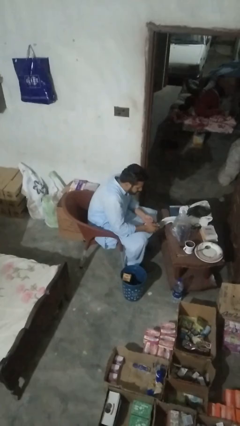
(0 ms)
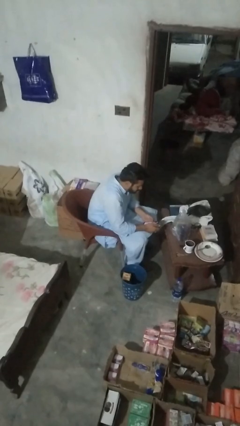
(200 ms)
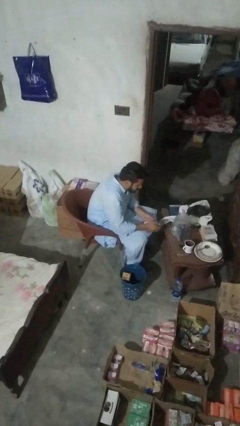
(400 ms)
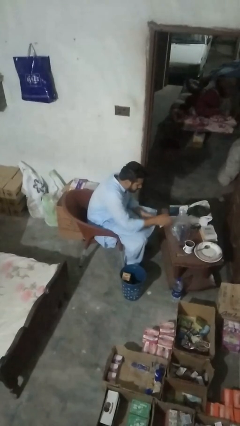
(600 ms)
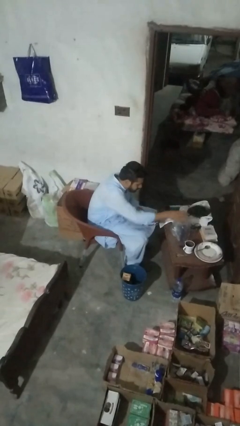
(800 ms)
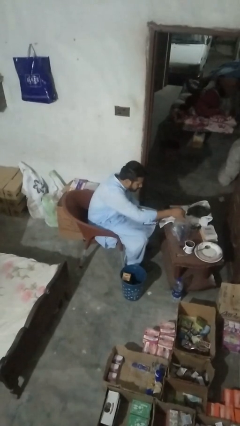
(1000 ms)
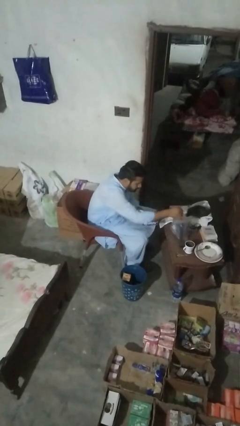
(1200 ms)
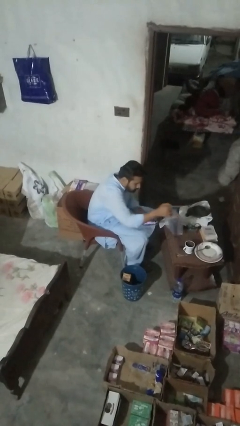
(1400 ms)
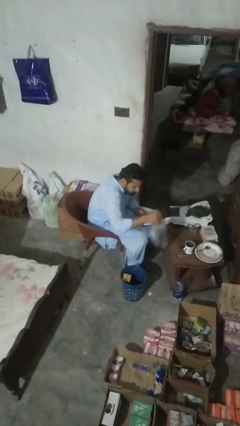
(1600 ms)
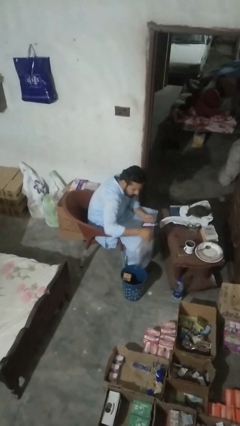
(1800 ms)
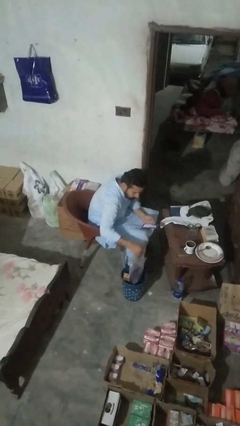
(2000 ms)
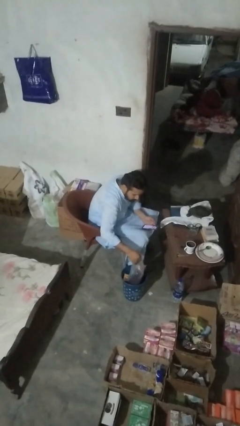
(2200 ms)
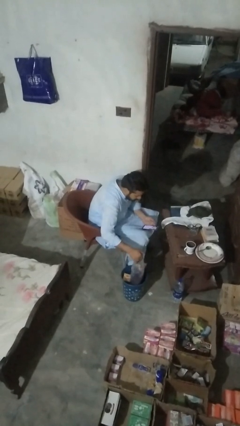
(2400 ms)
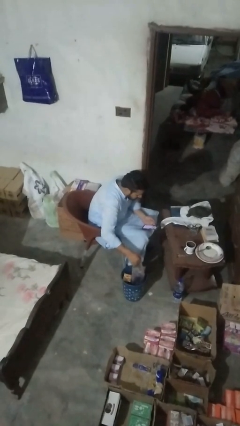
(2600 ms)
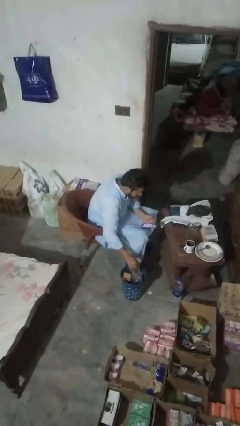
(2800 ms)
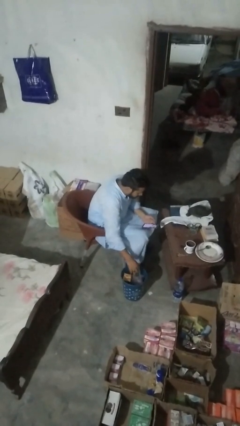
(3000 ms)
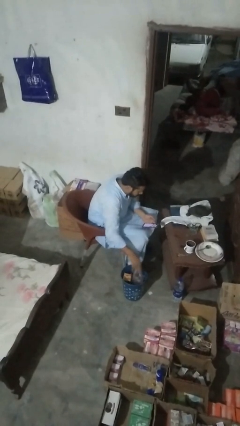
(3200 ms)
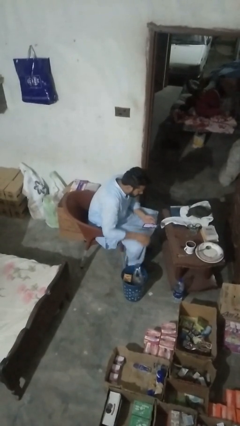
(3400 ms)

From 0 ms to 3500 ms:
person removes trashbag from trashcan

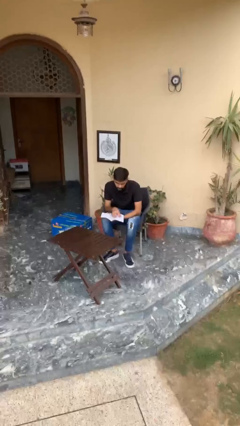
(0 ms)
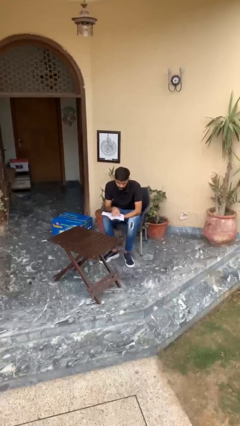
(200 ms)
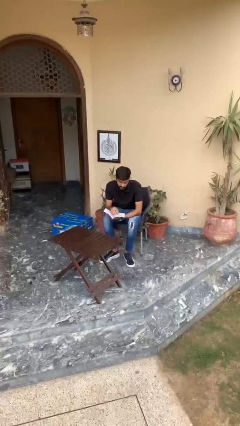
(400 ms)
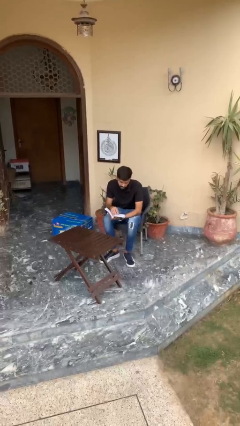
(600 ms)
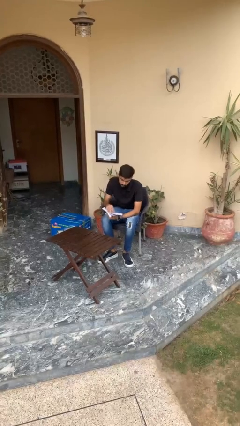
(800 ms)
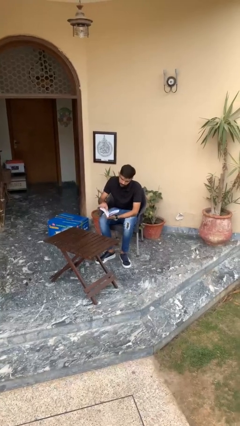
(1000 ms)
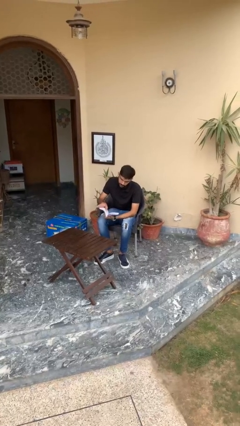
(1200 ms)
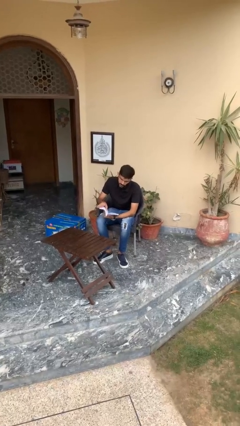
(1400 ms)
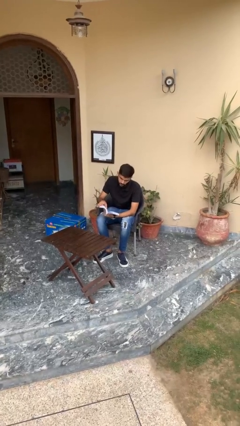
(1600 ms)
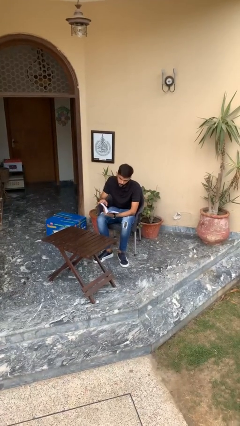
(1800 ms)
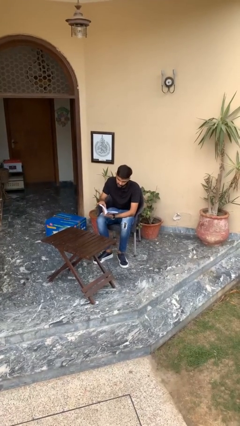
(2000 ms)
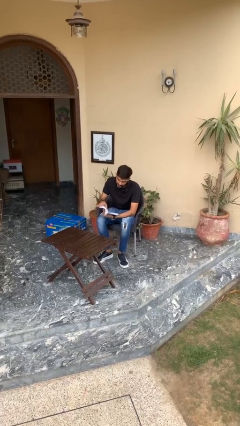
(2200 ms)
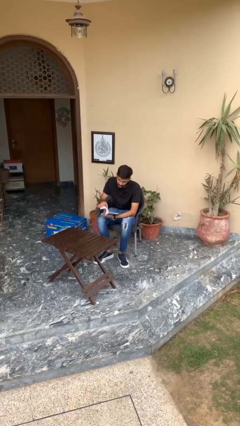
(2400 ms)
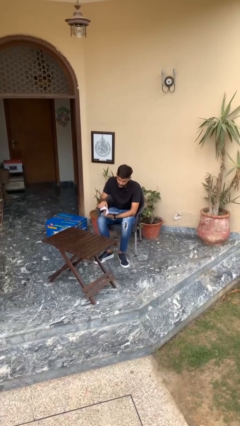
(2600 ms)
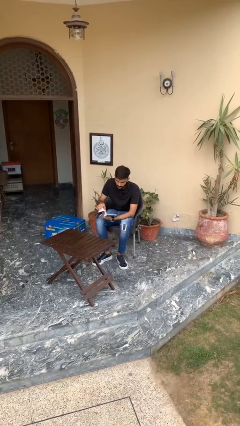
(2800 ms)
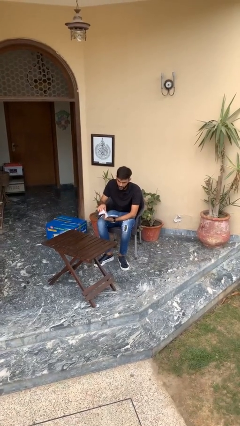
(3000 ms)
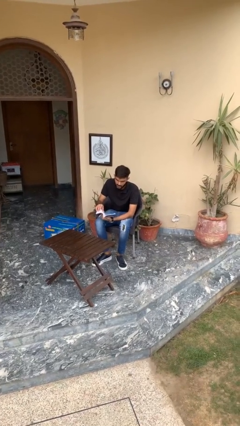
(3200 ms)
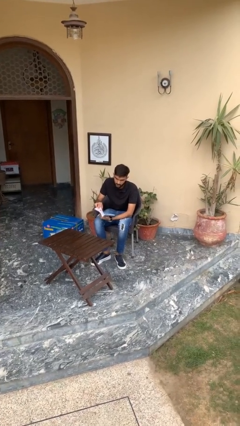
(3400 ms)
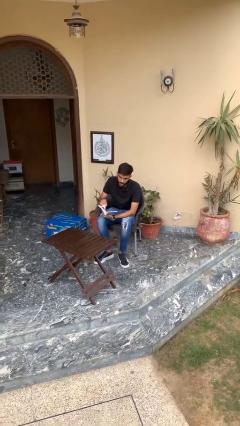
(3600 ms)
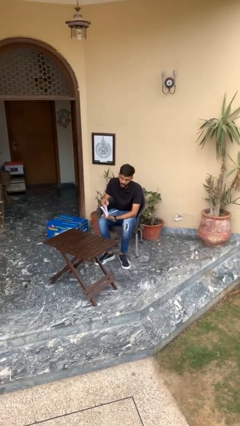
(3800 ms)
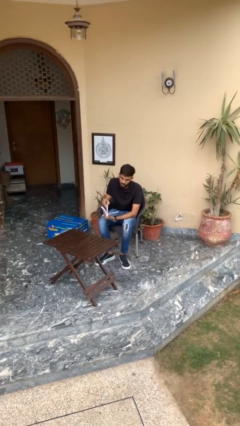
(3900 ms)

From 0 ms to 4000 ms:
person reads document

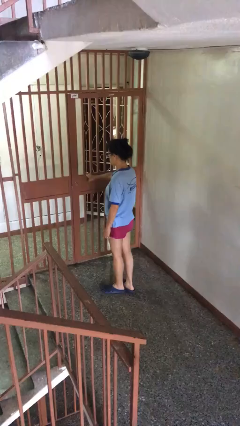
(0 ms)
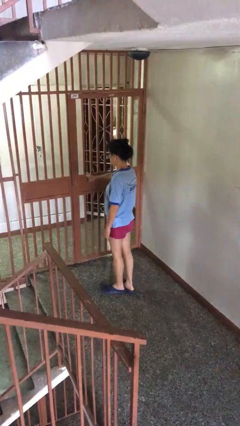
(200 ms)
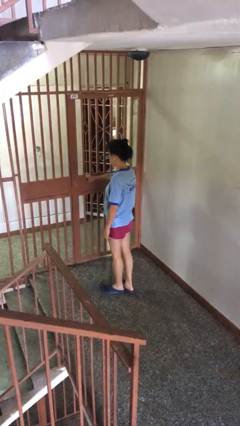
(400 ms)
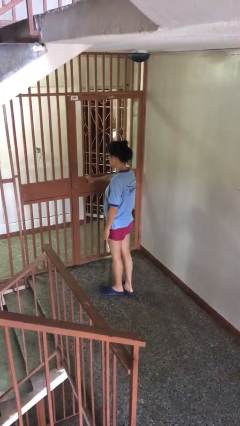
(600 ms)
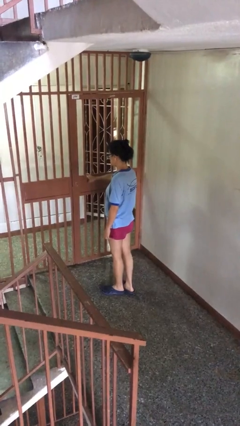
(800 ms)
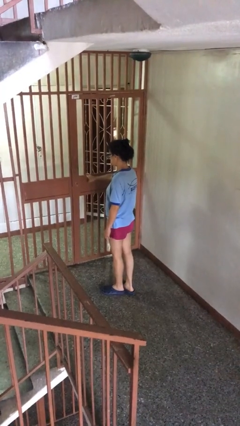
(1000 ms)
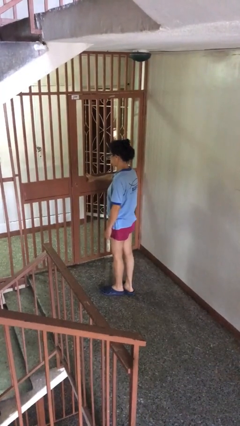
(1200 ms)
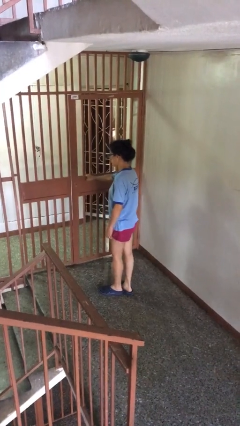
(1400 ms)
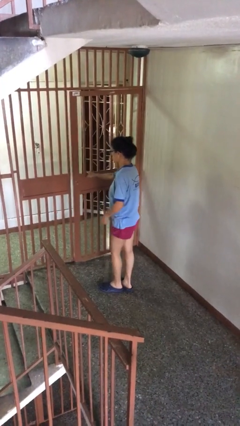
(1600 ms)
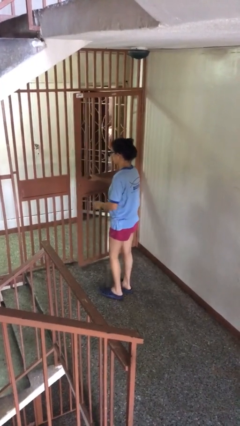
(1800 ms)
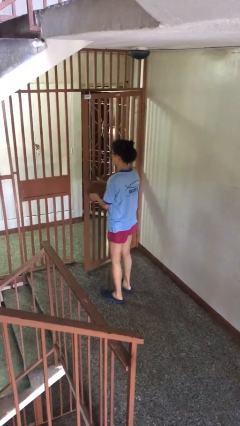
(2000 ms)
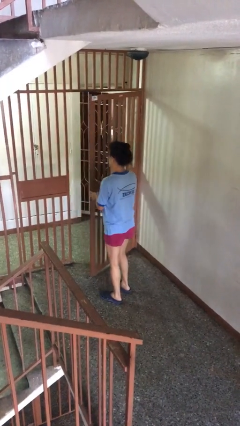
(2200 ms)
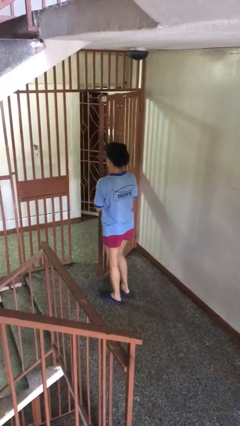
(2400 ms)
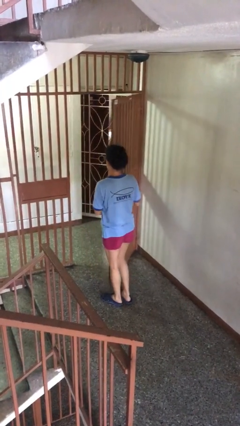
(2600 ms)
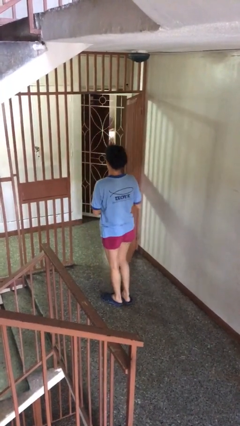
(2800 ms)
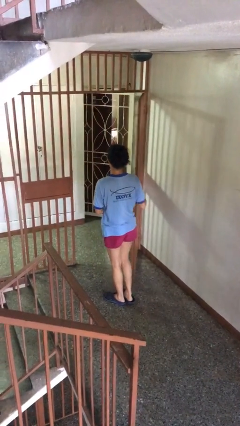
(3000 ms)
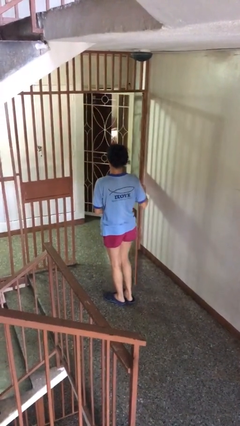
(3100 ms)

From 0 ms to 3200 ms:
person opens facility door

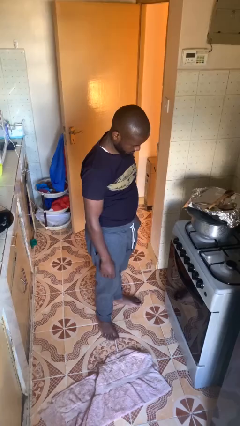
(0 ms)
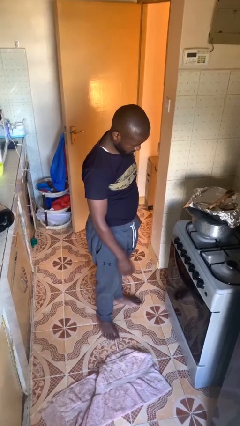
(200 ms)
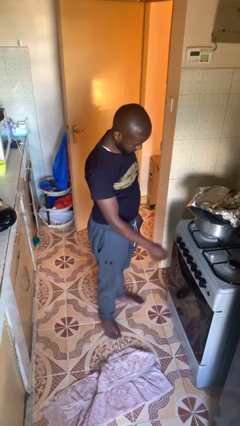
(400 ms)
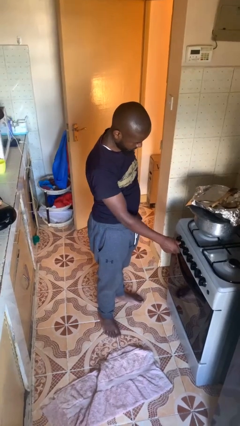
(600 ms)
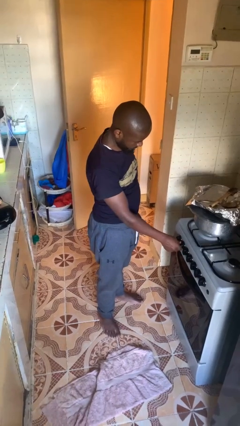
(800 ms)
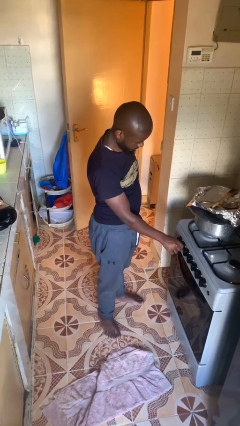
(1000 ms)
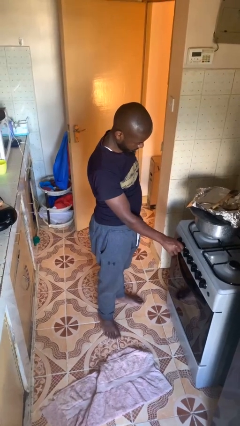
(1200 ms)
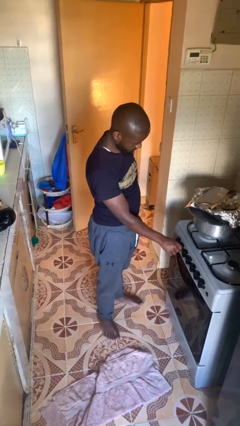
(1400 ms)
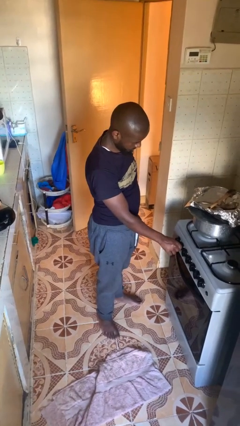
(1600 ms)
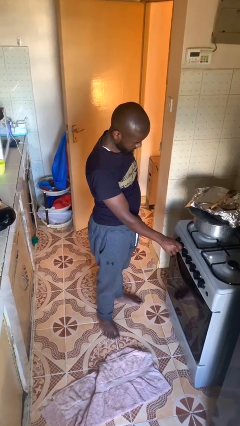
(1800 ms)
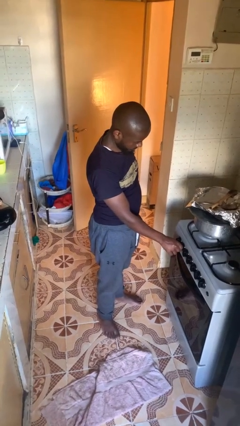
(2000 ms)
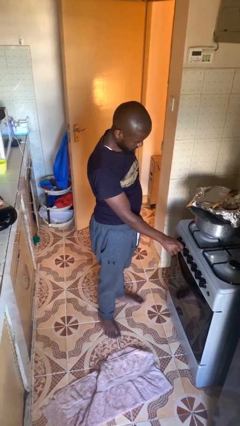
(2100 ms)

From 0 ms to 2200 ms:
person adjusts thermostat

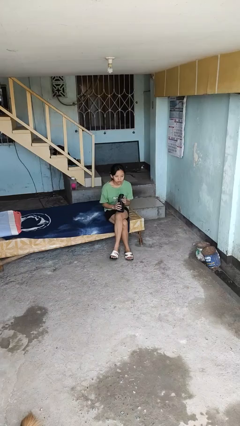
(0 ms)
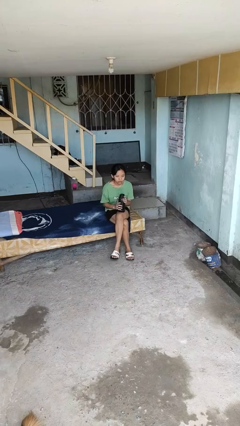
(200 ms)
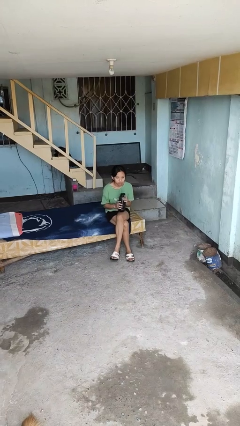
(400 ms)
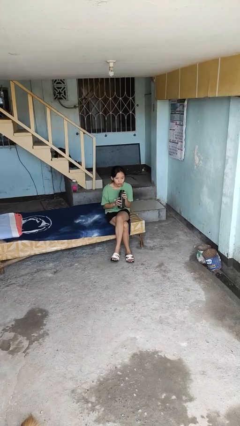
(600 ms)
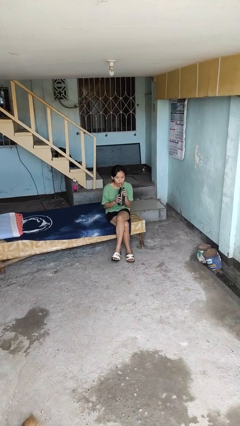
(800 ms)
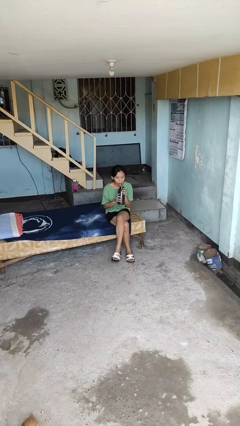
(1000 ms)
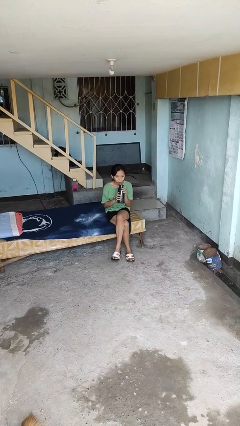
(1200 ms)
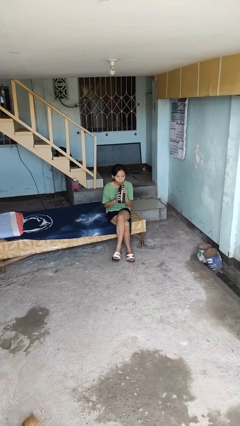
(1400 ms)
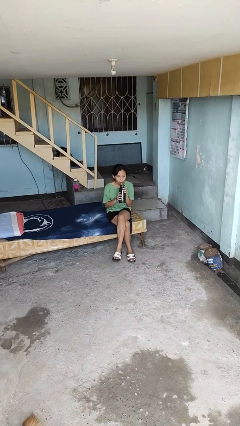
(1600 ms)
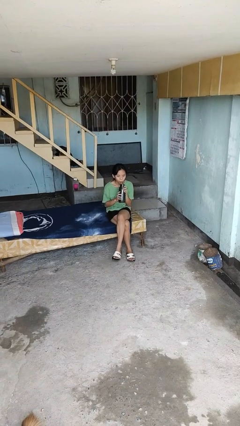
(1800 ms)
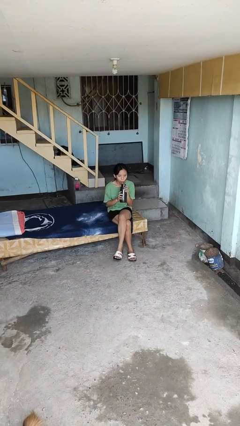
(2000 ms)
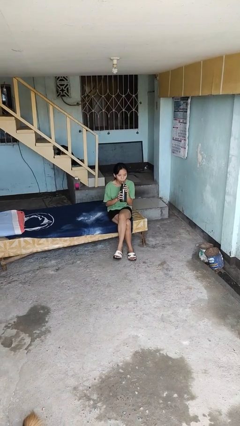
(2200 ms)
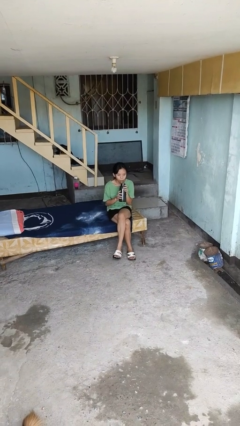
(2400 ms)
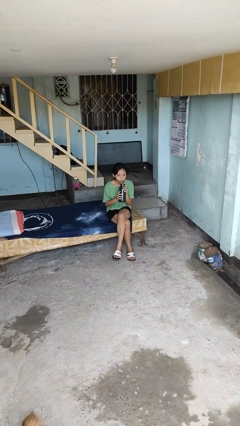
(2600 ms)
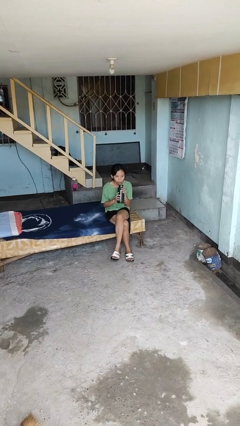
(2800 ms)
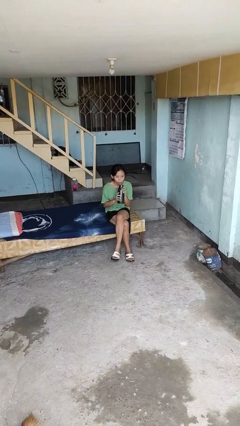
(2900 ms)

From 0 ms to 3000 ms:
person drinks from straw

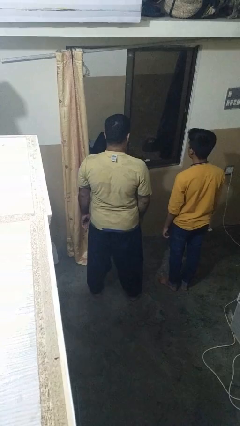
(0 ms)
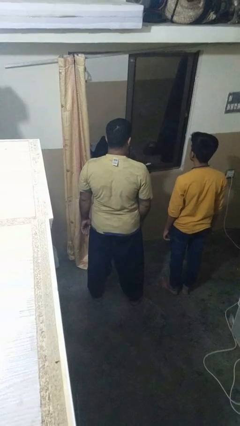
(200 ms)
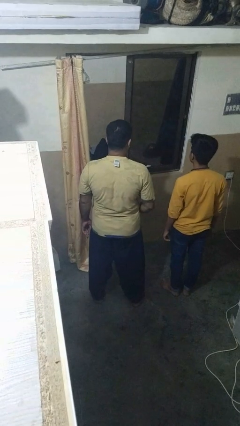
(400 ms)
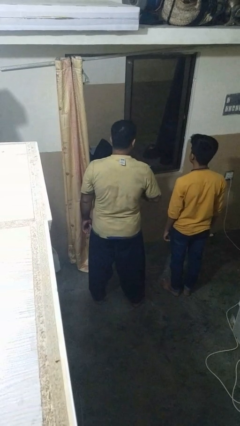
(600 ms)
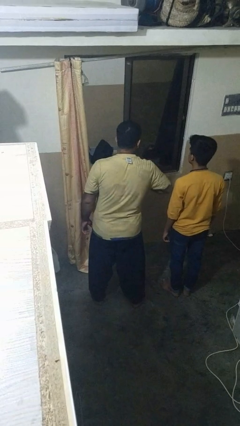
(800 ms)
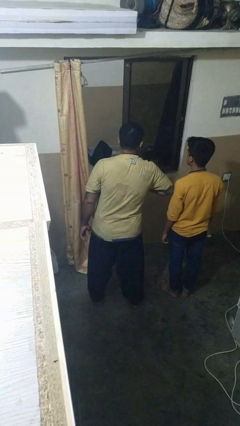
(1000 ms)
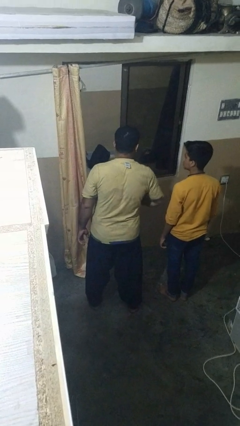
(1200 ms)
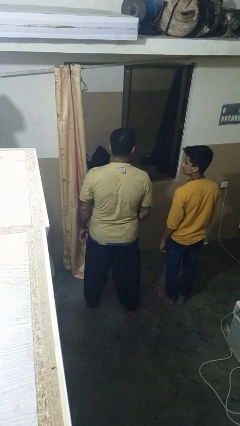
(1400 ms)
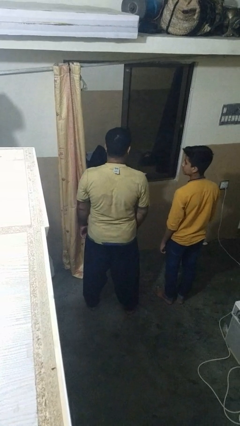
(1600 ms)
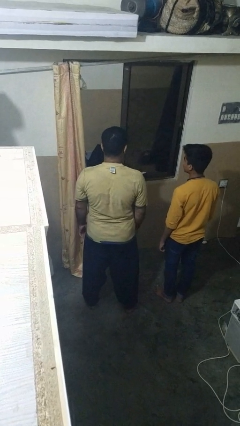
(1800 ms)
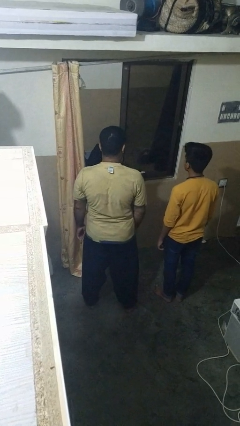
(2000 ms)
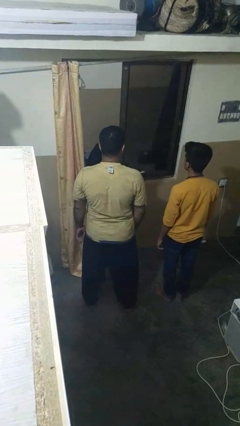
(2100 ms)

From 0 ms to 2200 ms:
person nudges person with elbow
